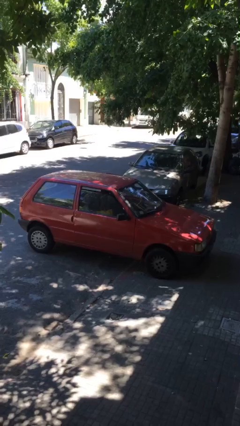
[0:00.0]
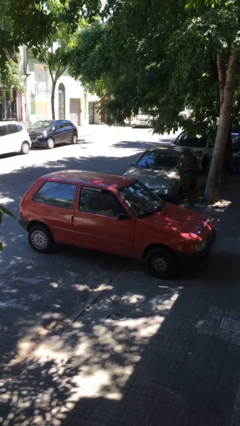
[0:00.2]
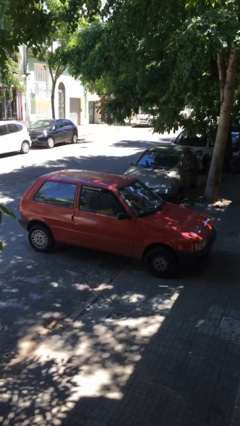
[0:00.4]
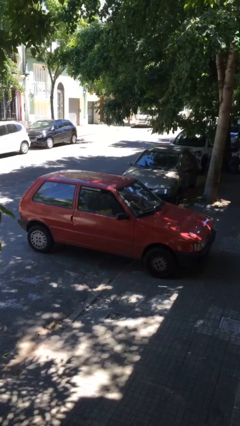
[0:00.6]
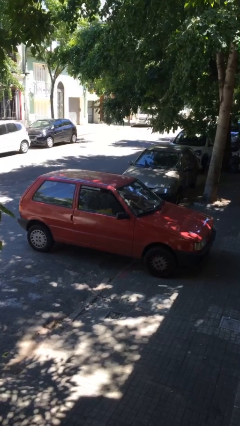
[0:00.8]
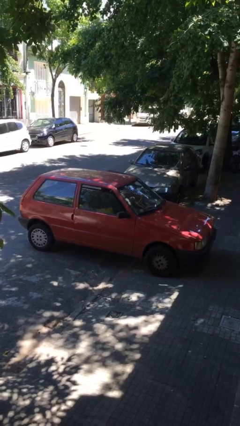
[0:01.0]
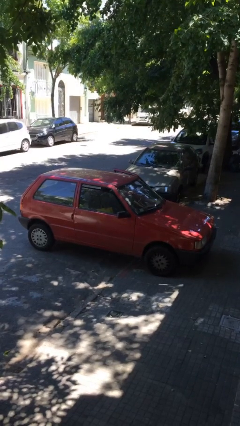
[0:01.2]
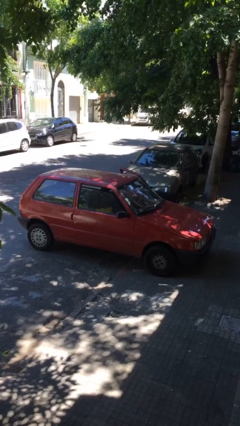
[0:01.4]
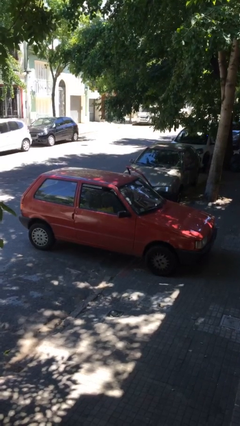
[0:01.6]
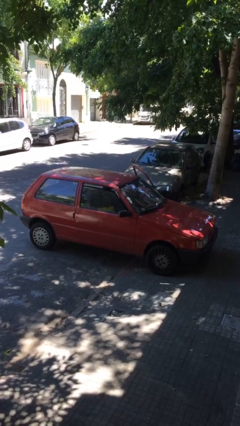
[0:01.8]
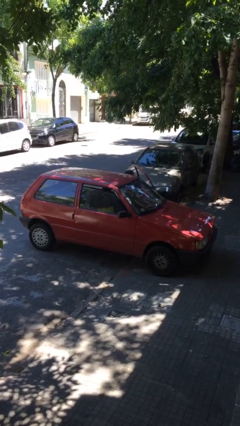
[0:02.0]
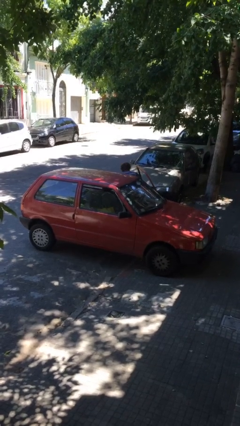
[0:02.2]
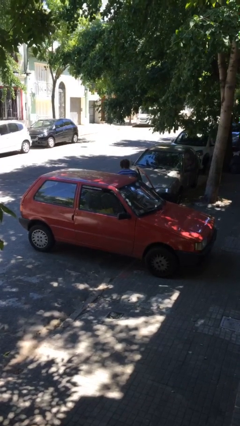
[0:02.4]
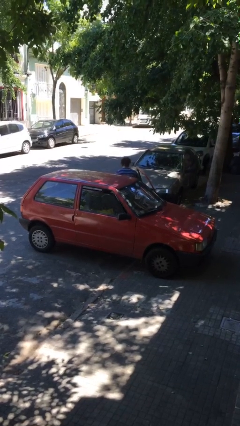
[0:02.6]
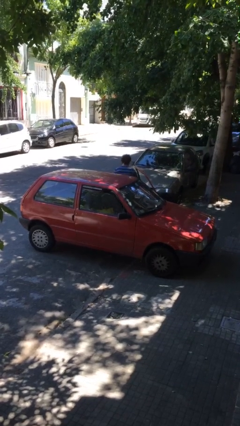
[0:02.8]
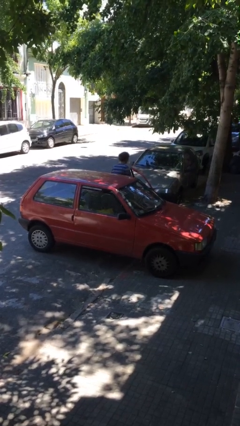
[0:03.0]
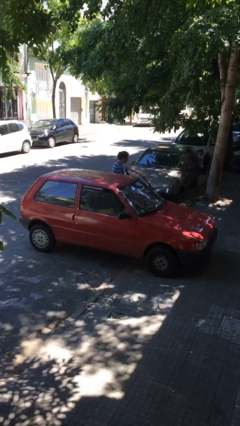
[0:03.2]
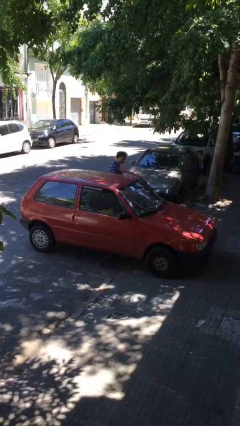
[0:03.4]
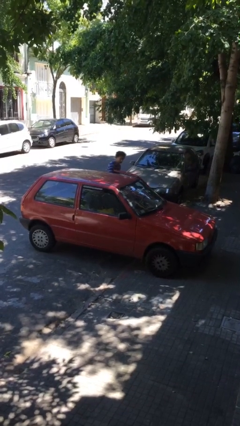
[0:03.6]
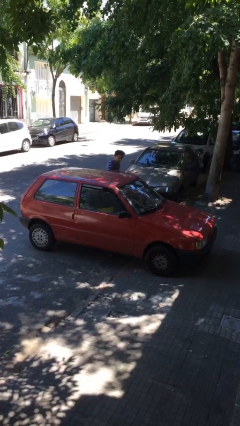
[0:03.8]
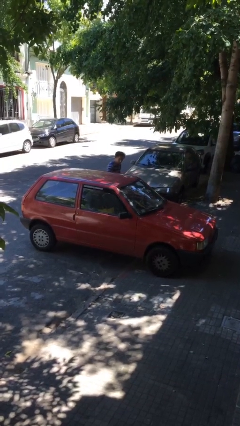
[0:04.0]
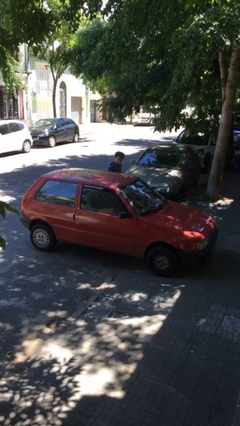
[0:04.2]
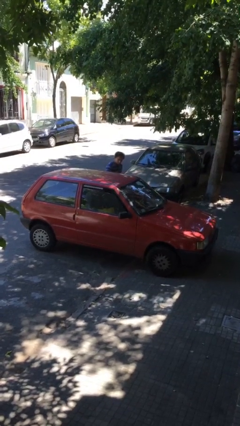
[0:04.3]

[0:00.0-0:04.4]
car drops off person

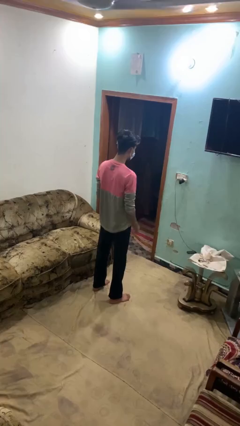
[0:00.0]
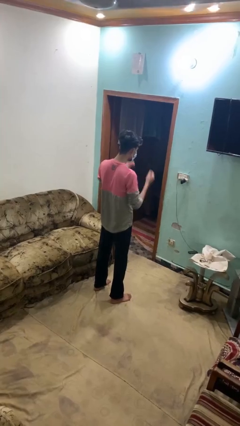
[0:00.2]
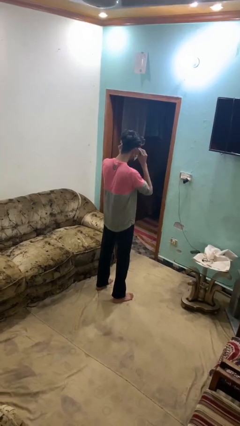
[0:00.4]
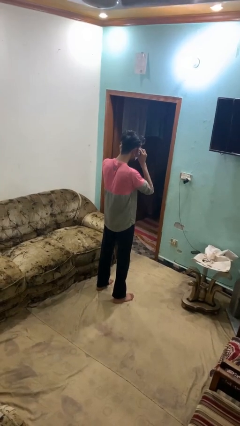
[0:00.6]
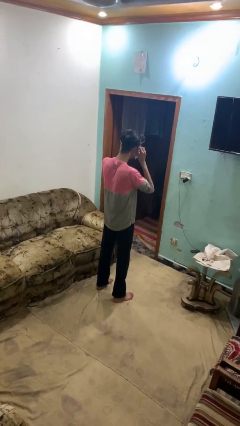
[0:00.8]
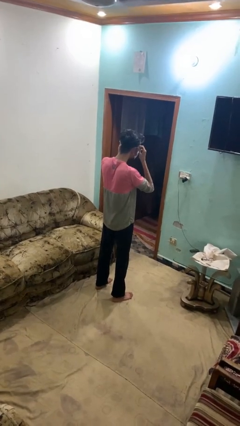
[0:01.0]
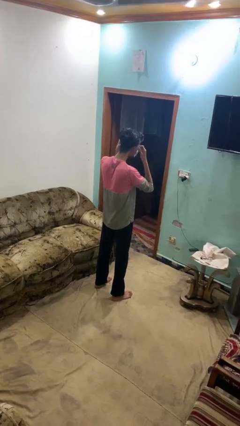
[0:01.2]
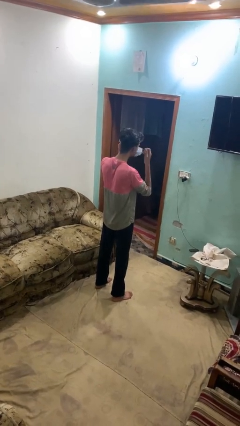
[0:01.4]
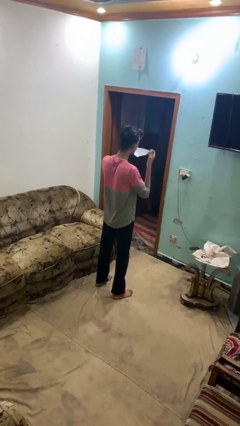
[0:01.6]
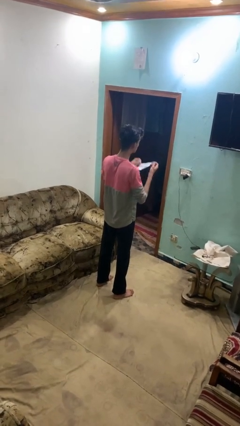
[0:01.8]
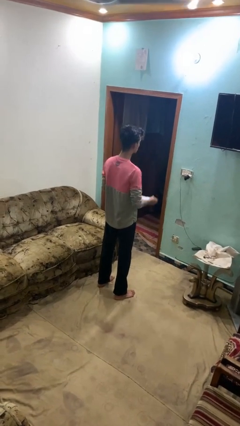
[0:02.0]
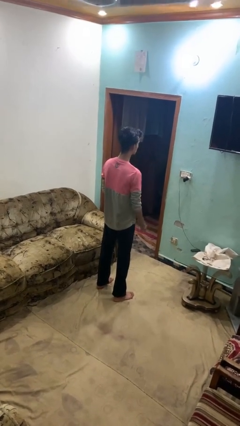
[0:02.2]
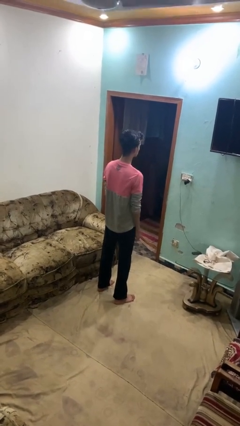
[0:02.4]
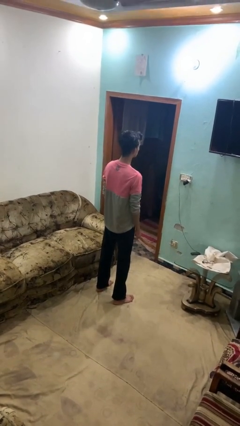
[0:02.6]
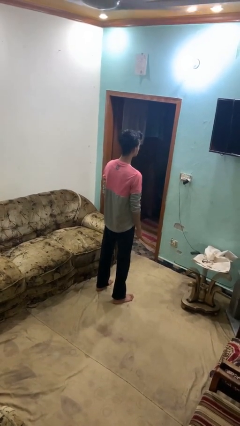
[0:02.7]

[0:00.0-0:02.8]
person takes off facemask

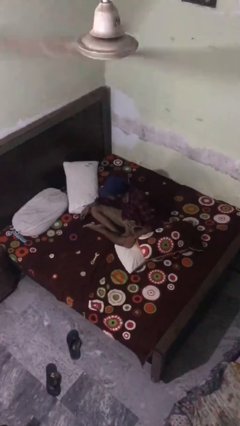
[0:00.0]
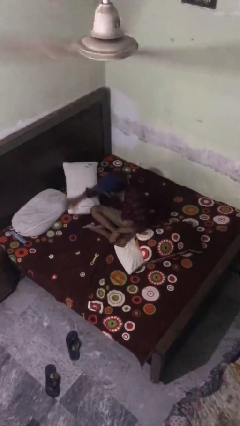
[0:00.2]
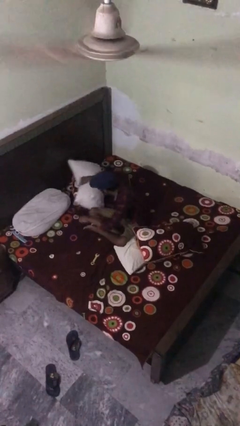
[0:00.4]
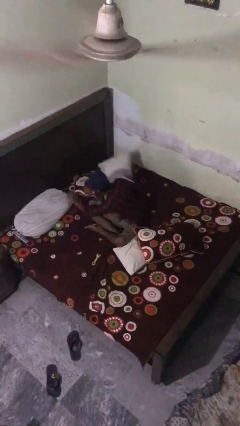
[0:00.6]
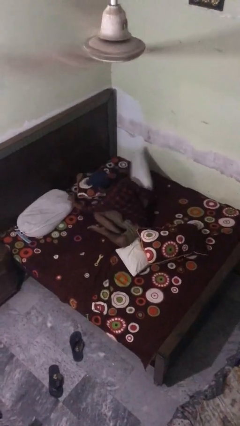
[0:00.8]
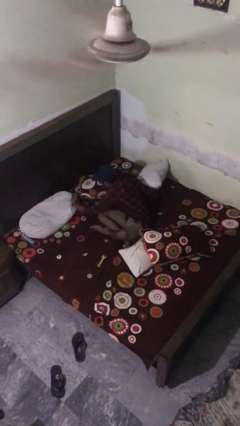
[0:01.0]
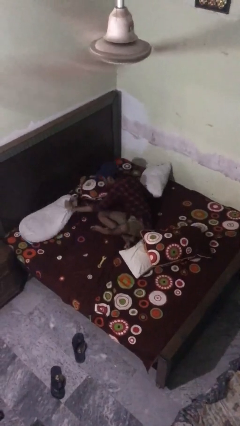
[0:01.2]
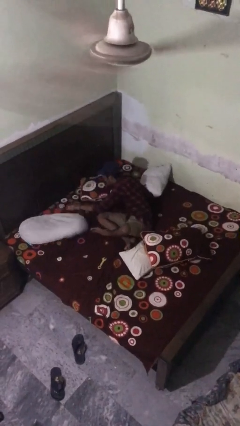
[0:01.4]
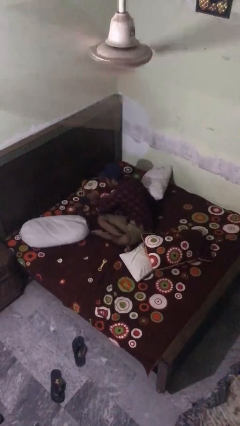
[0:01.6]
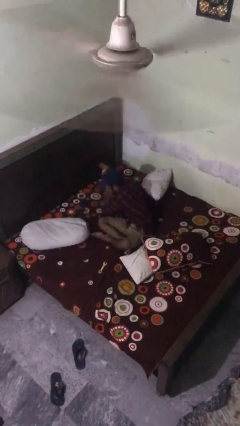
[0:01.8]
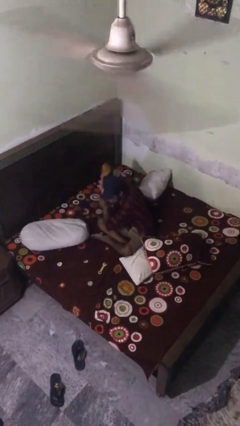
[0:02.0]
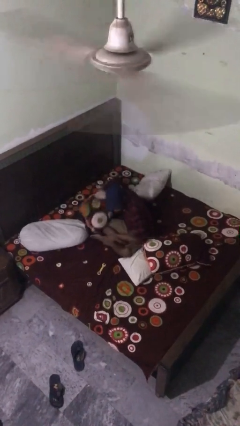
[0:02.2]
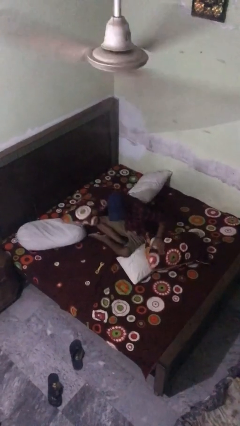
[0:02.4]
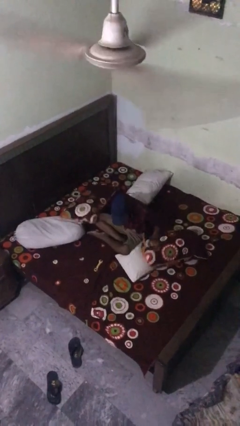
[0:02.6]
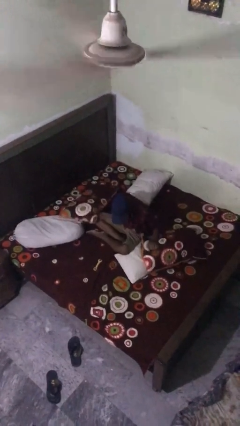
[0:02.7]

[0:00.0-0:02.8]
person searches under bed

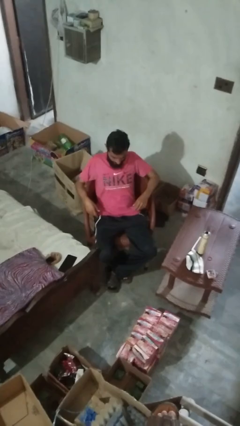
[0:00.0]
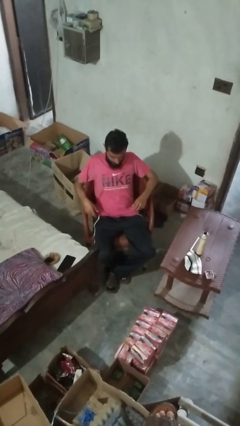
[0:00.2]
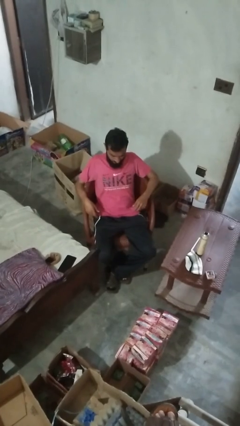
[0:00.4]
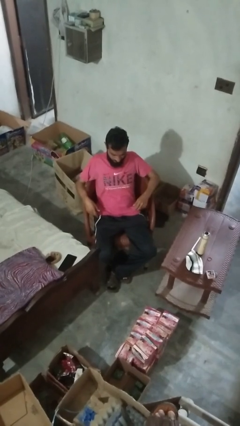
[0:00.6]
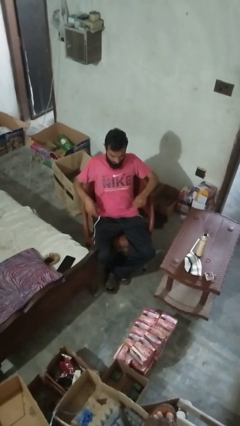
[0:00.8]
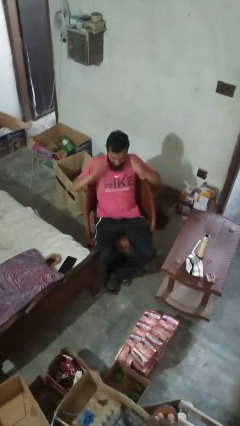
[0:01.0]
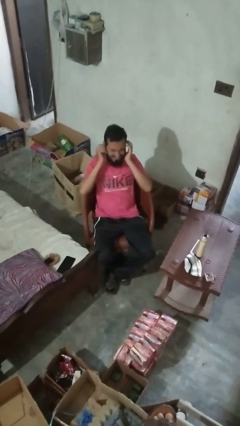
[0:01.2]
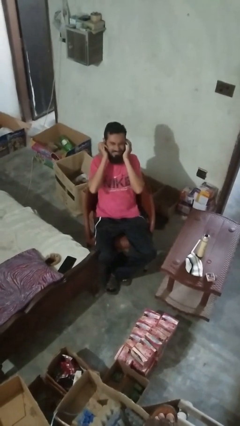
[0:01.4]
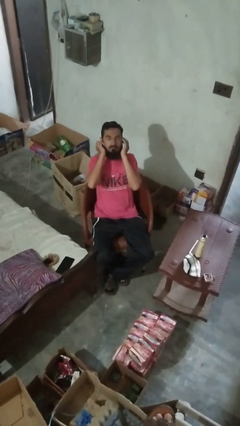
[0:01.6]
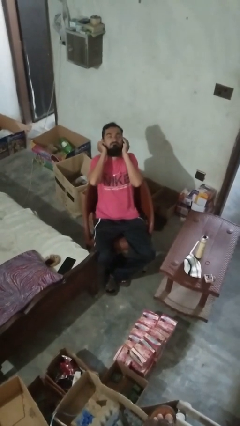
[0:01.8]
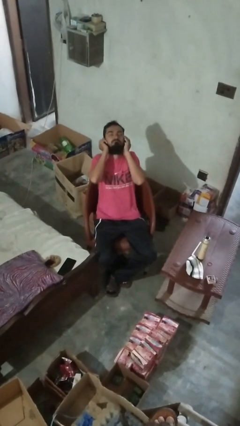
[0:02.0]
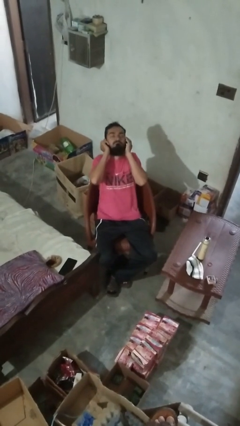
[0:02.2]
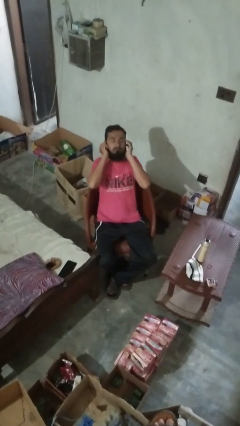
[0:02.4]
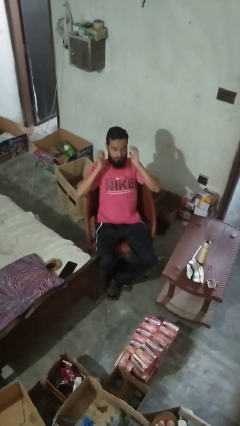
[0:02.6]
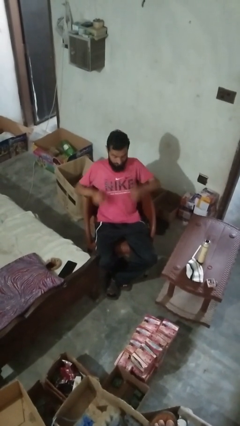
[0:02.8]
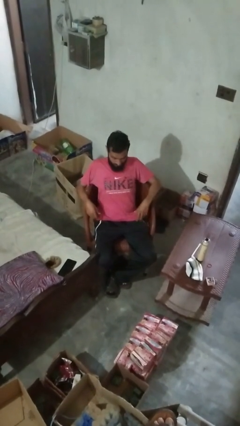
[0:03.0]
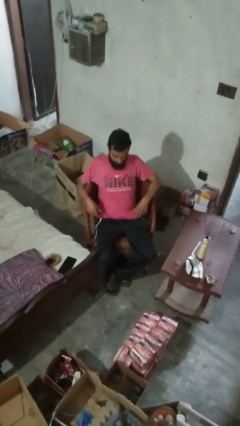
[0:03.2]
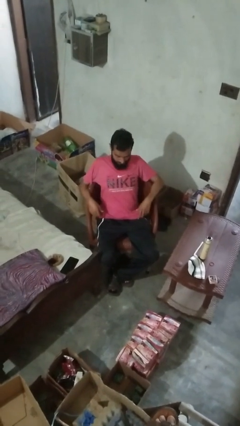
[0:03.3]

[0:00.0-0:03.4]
person puts fingers in ear

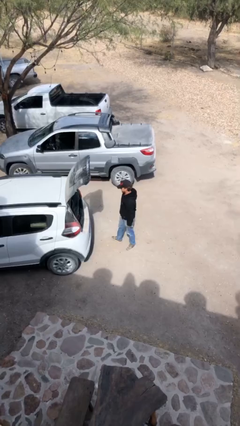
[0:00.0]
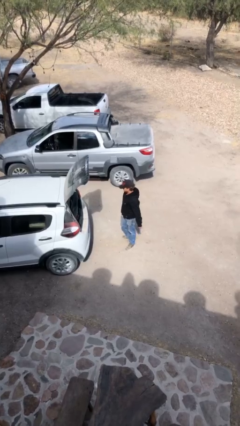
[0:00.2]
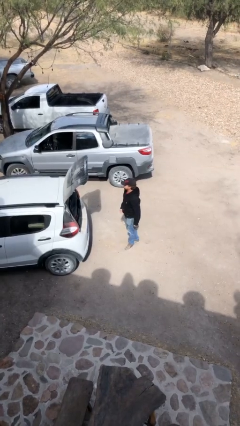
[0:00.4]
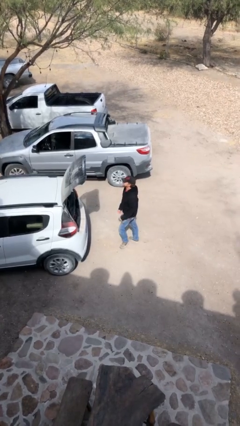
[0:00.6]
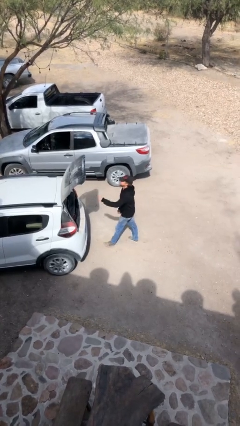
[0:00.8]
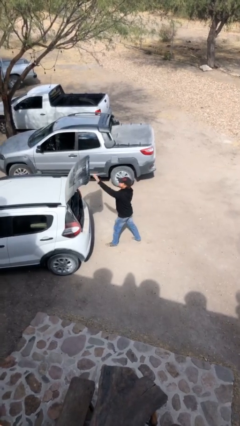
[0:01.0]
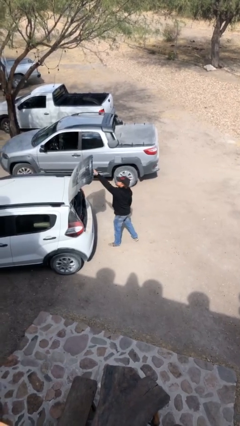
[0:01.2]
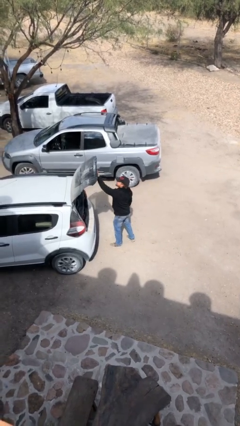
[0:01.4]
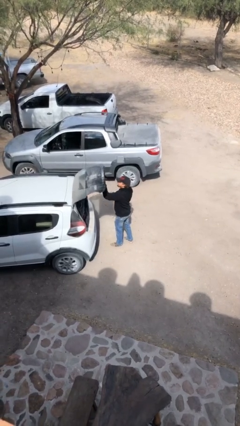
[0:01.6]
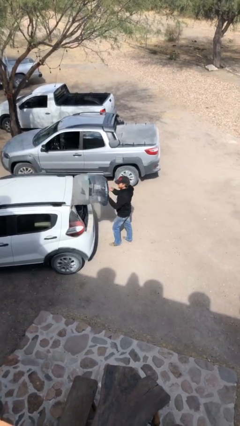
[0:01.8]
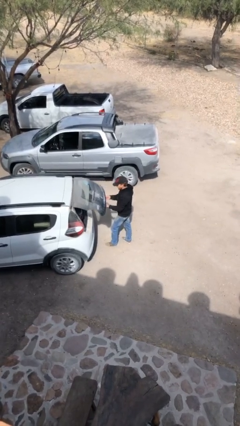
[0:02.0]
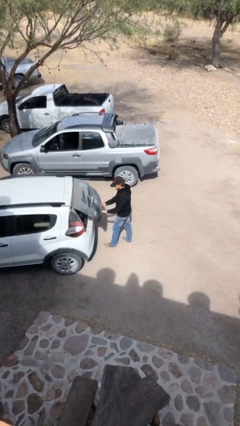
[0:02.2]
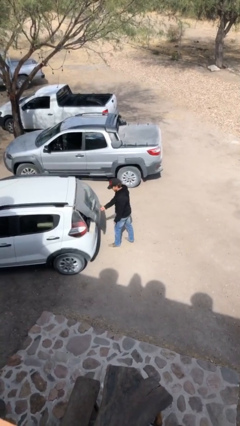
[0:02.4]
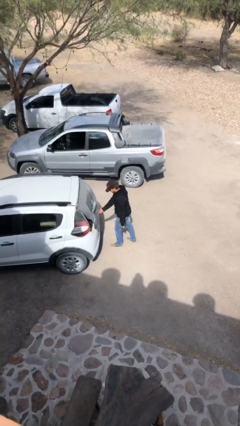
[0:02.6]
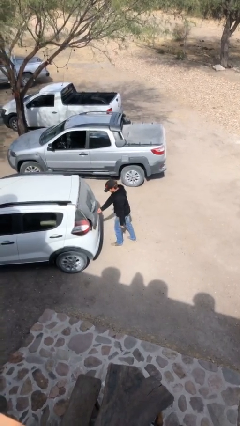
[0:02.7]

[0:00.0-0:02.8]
person closes car trunk

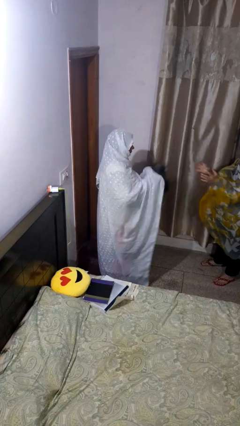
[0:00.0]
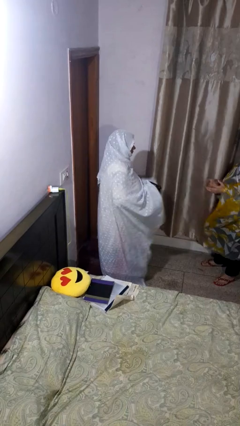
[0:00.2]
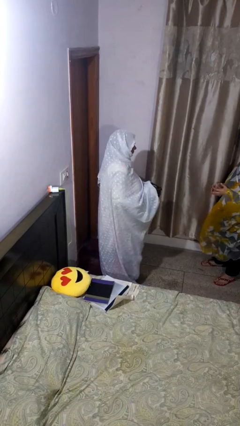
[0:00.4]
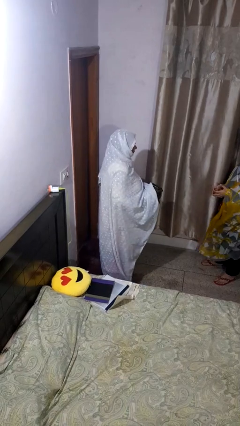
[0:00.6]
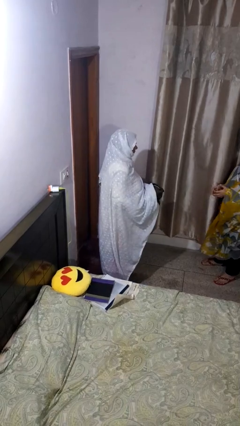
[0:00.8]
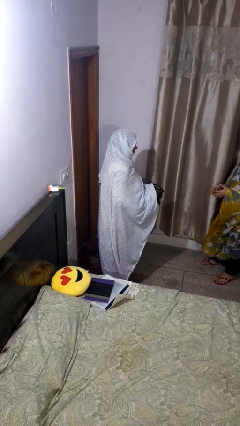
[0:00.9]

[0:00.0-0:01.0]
person catches object from person
